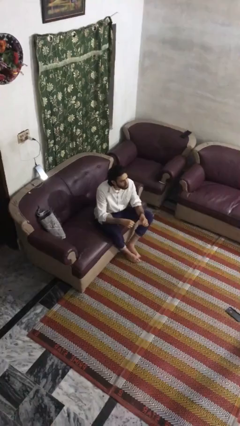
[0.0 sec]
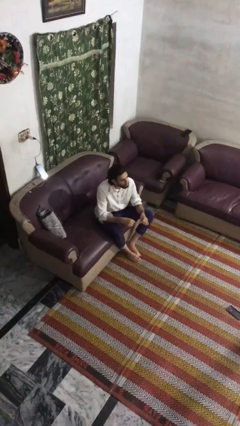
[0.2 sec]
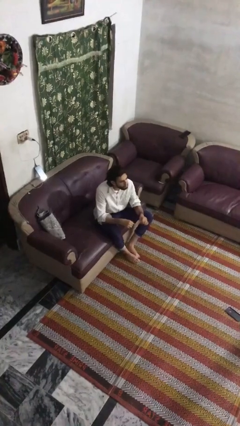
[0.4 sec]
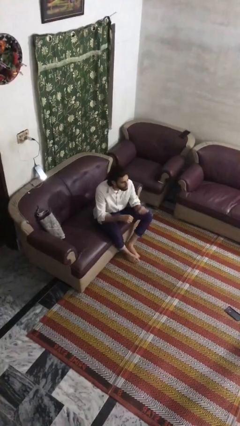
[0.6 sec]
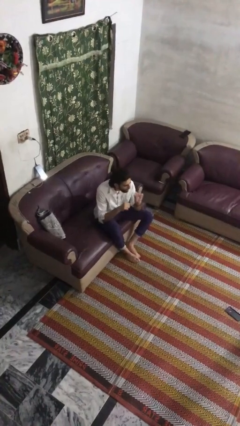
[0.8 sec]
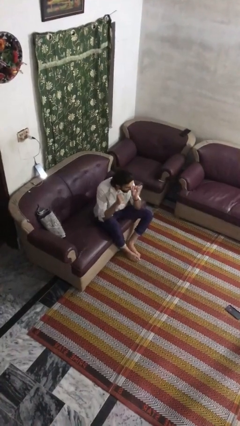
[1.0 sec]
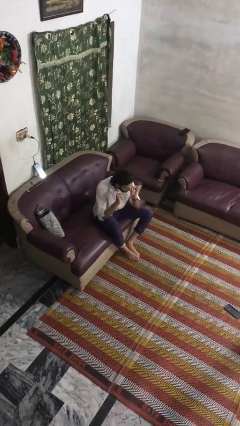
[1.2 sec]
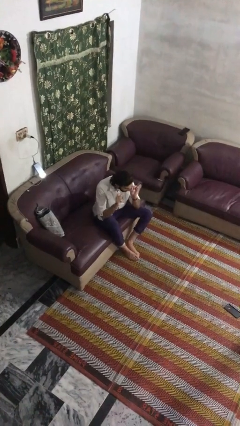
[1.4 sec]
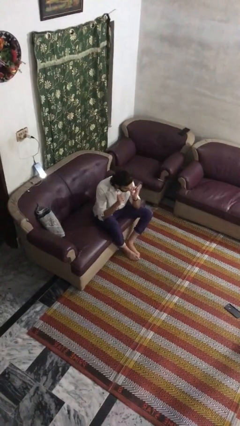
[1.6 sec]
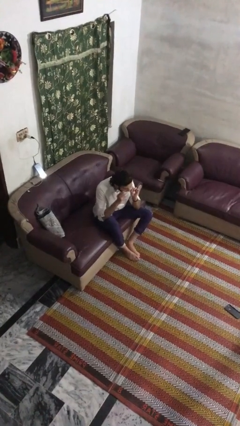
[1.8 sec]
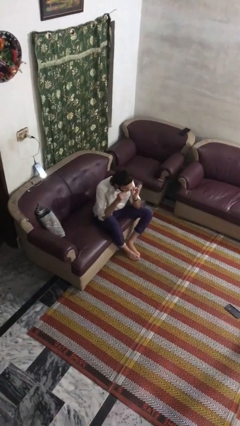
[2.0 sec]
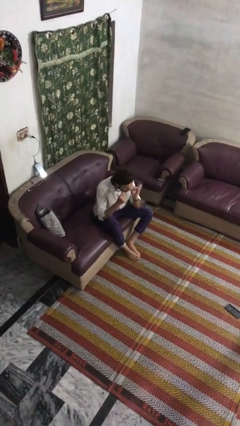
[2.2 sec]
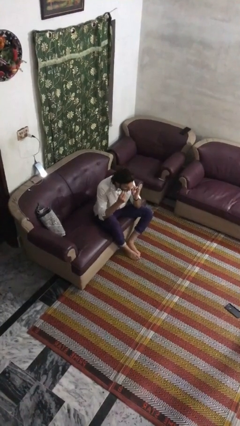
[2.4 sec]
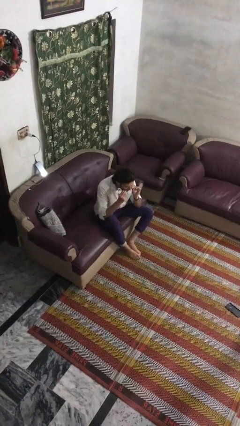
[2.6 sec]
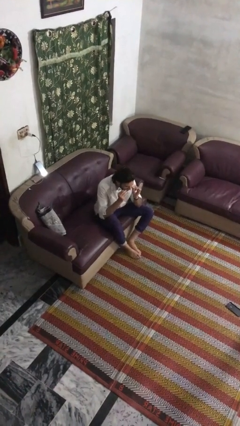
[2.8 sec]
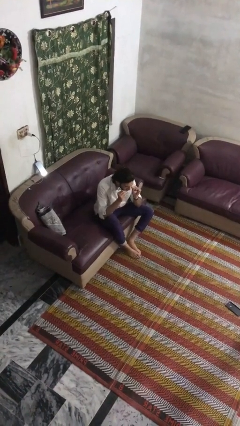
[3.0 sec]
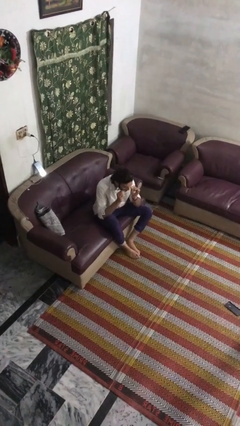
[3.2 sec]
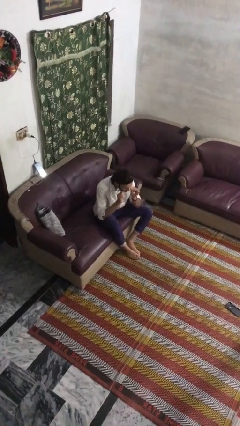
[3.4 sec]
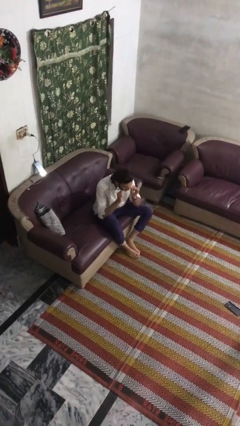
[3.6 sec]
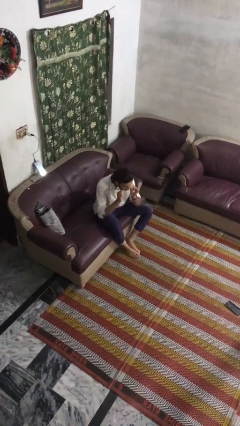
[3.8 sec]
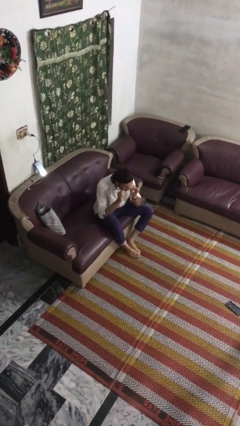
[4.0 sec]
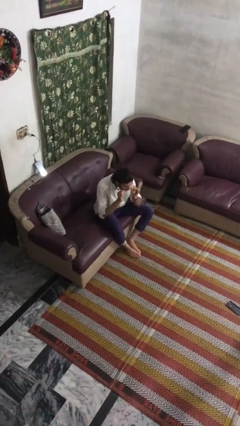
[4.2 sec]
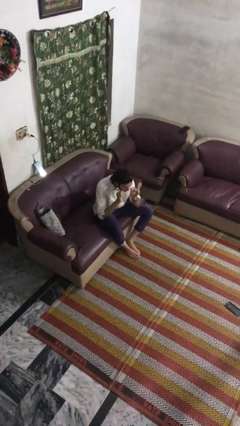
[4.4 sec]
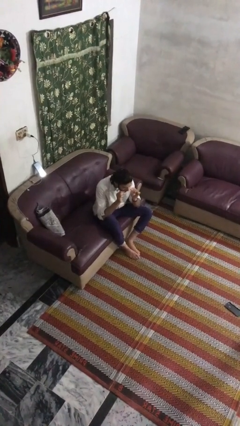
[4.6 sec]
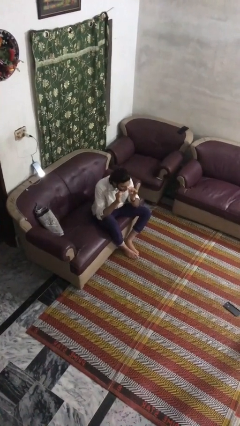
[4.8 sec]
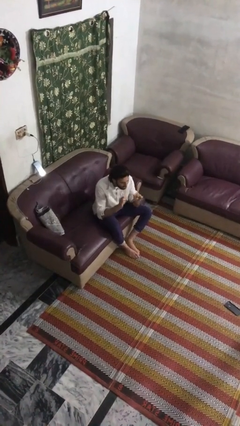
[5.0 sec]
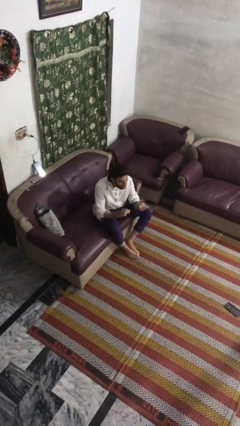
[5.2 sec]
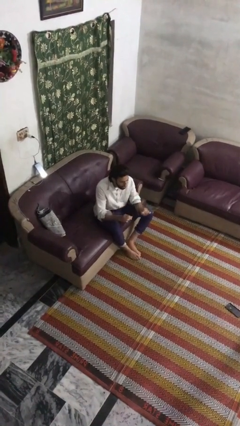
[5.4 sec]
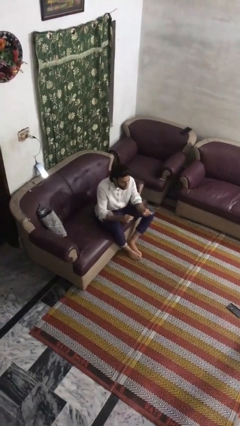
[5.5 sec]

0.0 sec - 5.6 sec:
person flosses

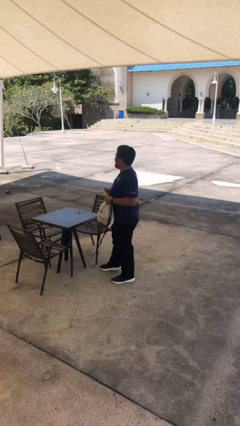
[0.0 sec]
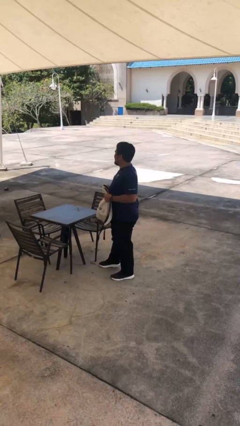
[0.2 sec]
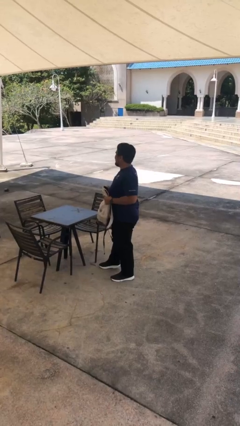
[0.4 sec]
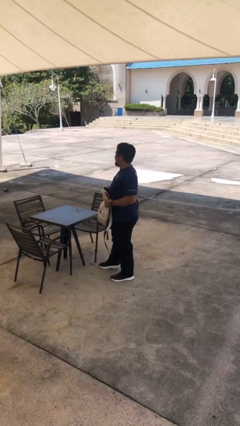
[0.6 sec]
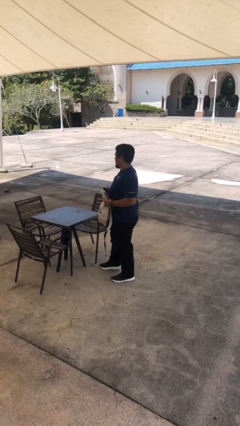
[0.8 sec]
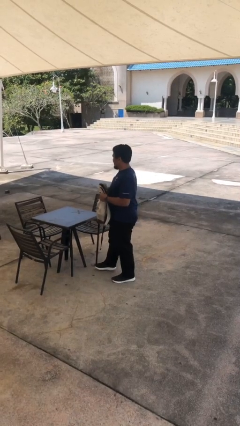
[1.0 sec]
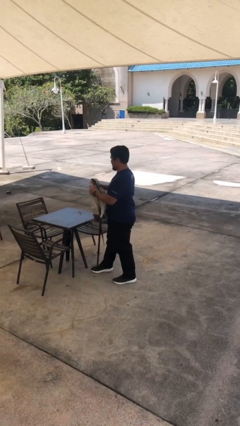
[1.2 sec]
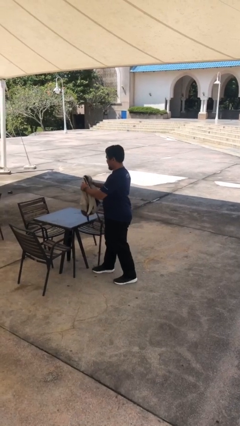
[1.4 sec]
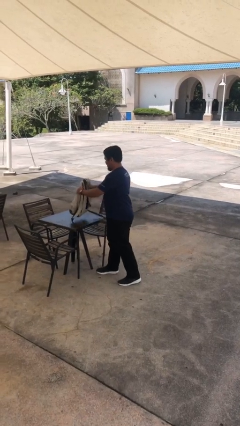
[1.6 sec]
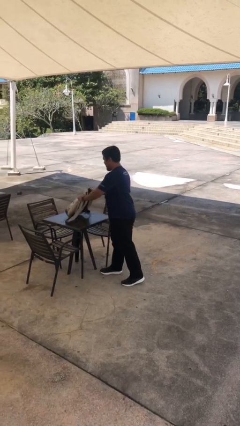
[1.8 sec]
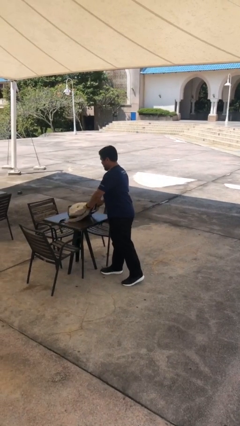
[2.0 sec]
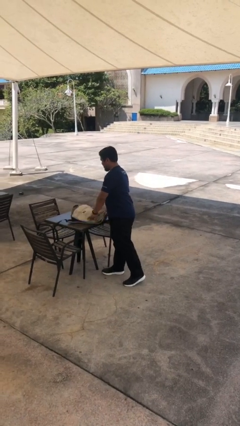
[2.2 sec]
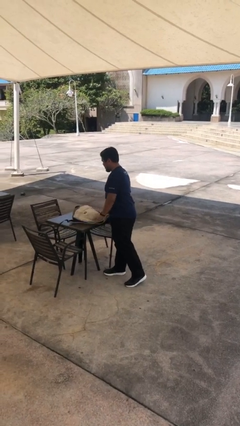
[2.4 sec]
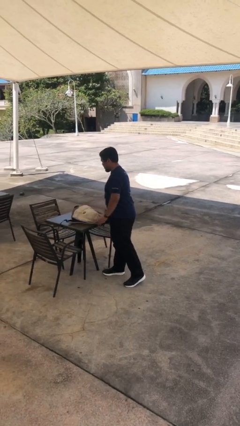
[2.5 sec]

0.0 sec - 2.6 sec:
person puts down object on table

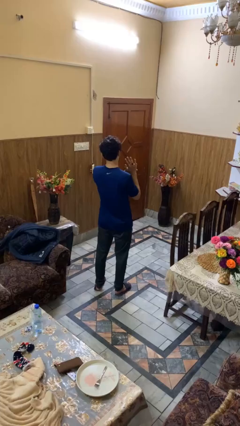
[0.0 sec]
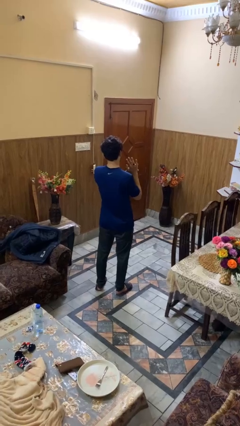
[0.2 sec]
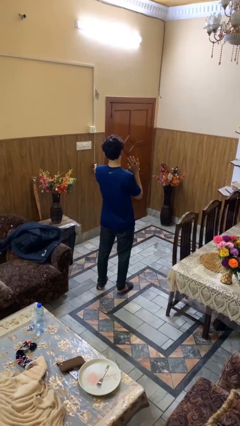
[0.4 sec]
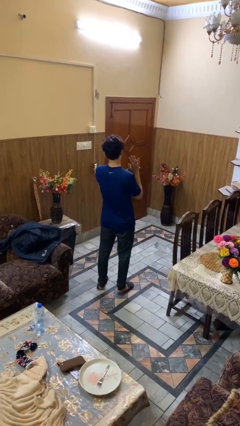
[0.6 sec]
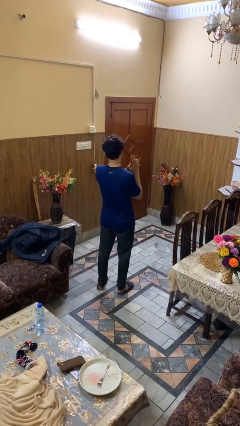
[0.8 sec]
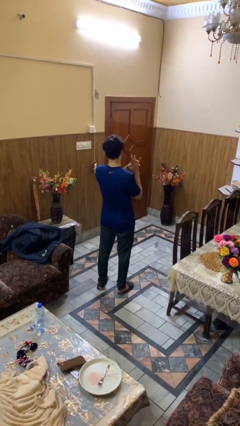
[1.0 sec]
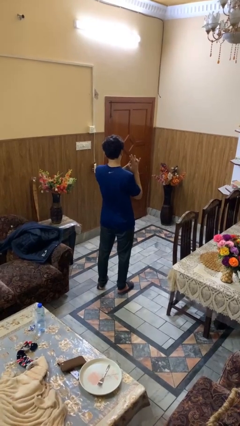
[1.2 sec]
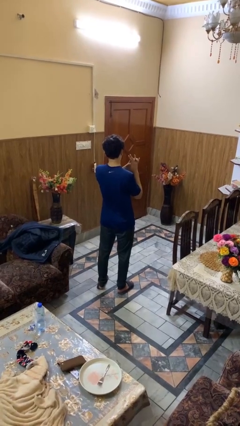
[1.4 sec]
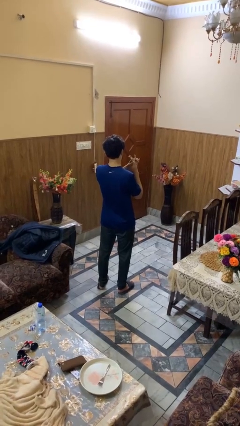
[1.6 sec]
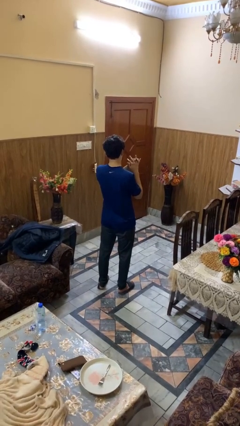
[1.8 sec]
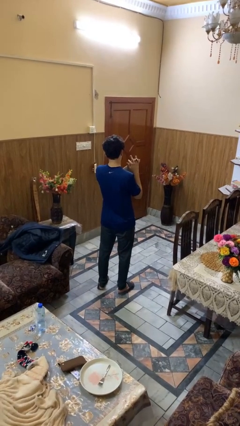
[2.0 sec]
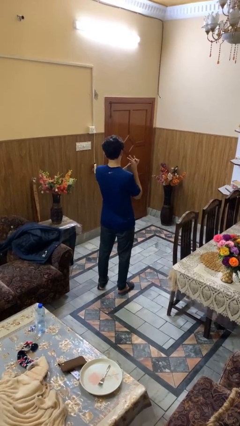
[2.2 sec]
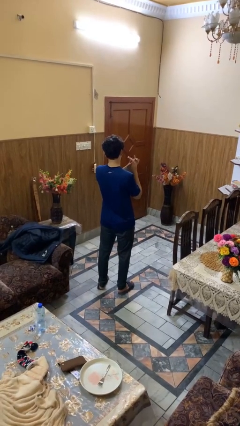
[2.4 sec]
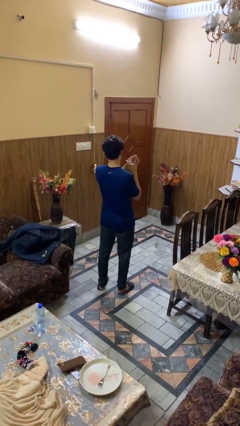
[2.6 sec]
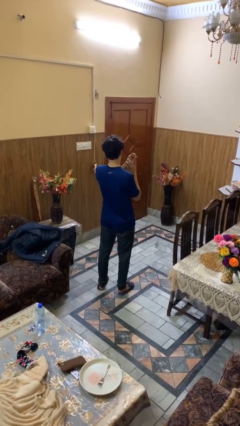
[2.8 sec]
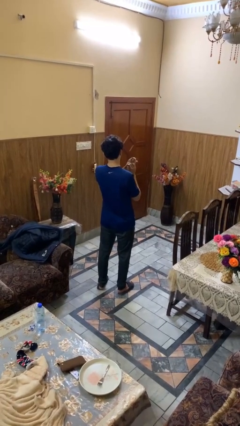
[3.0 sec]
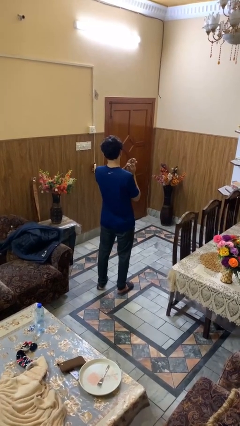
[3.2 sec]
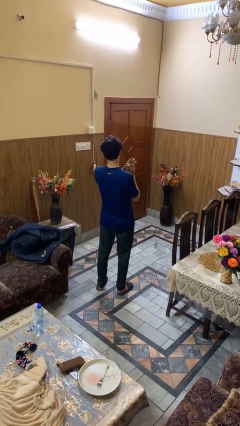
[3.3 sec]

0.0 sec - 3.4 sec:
person takes off ring

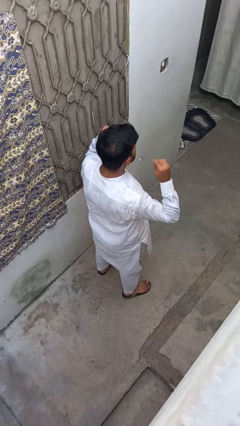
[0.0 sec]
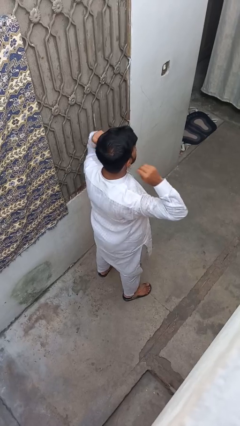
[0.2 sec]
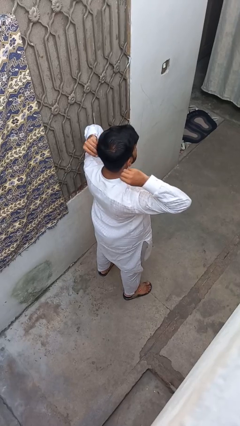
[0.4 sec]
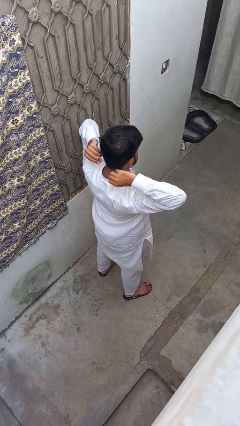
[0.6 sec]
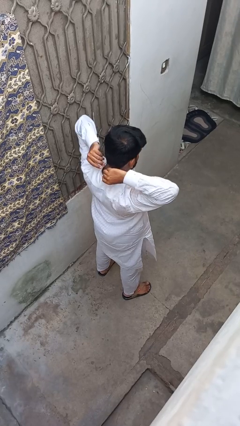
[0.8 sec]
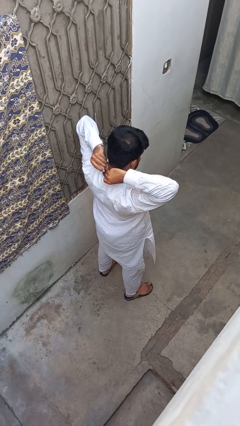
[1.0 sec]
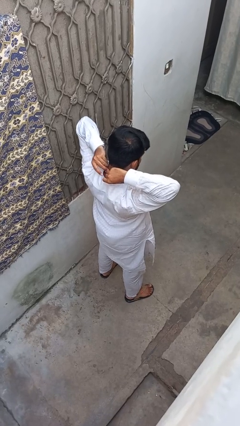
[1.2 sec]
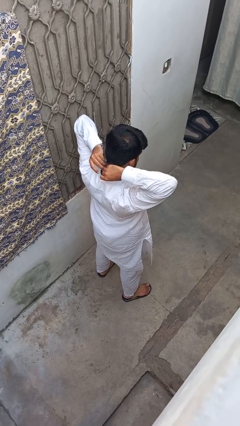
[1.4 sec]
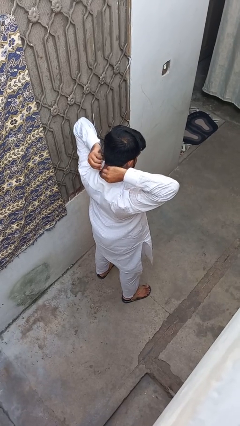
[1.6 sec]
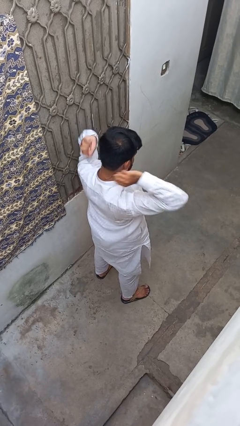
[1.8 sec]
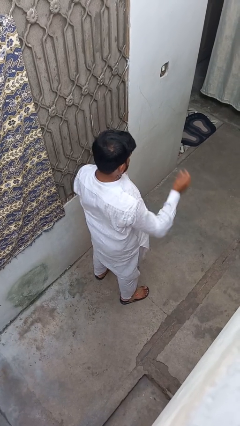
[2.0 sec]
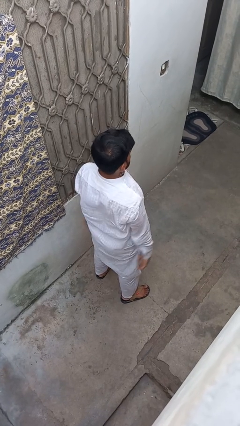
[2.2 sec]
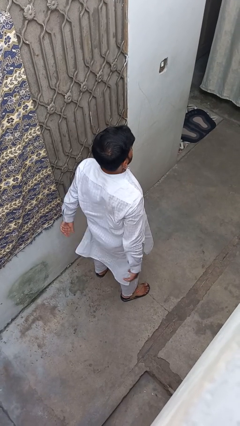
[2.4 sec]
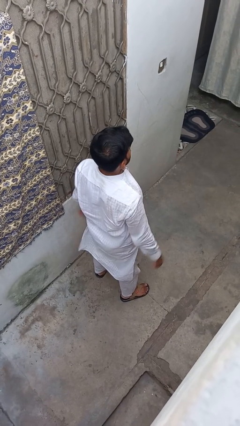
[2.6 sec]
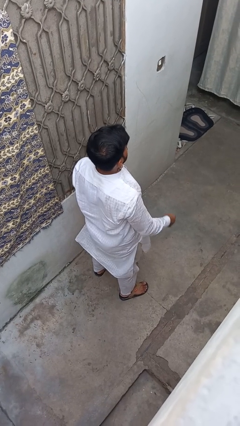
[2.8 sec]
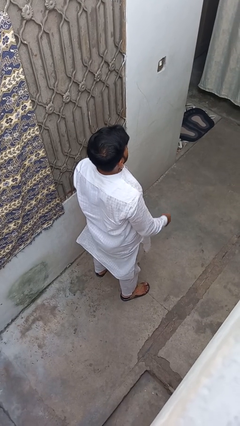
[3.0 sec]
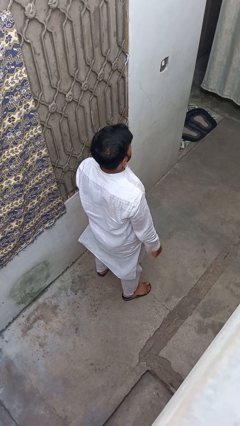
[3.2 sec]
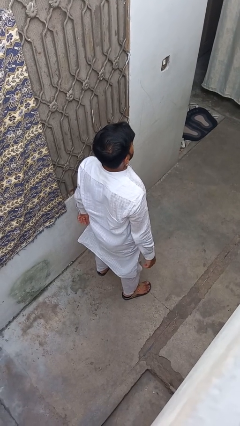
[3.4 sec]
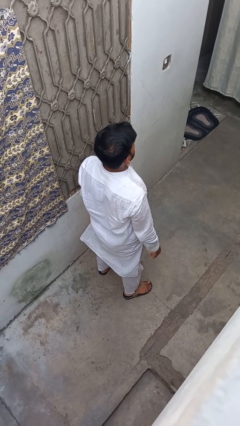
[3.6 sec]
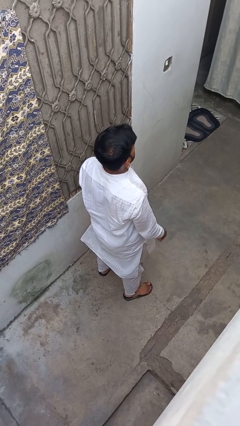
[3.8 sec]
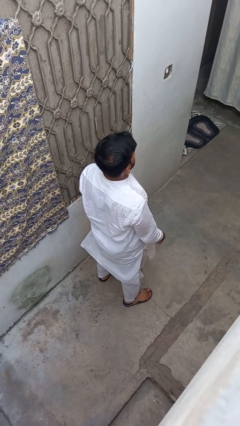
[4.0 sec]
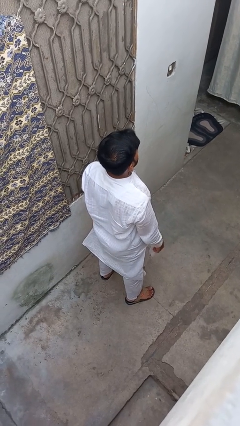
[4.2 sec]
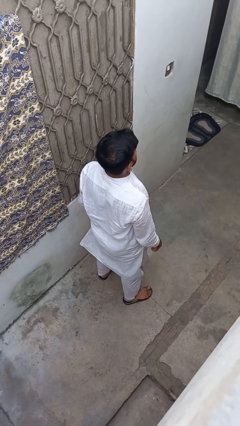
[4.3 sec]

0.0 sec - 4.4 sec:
person puts on necklace

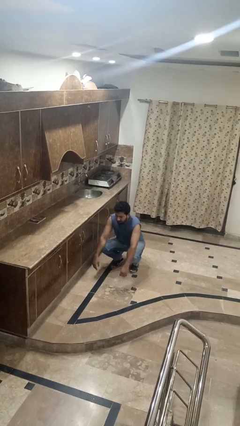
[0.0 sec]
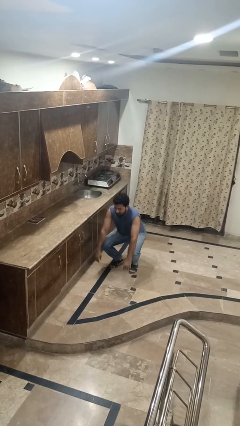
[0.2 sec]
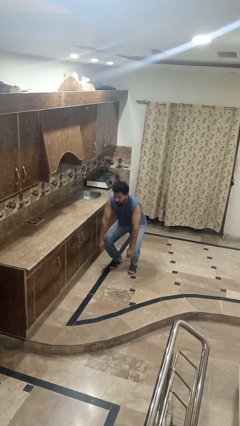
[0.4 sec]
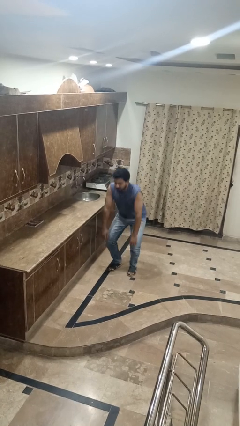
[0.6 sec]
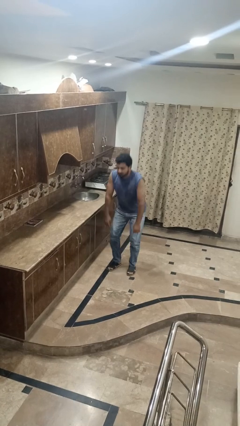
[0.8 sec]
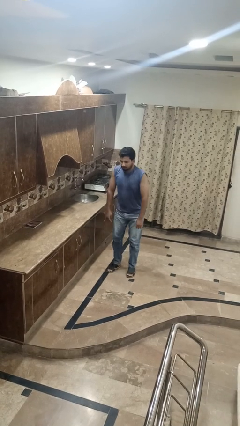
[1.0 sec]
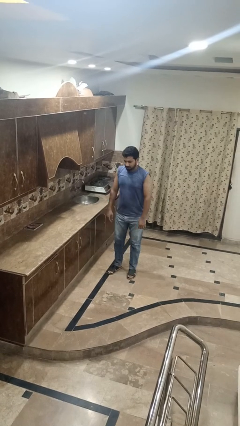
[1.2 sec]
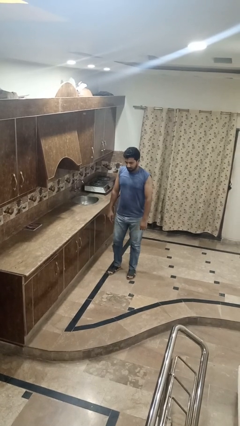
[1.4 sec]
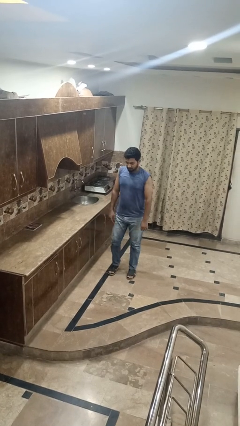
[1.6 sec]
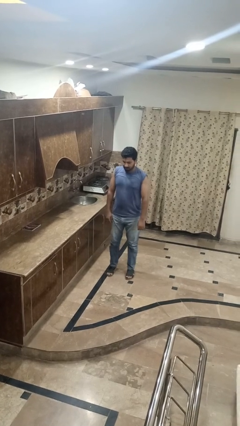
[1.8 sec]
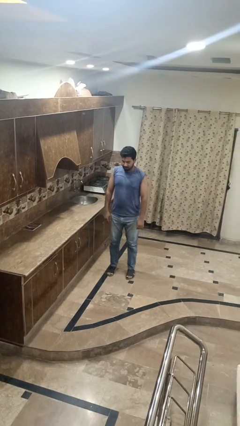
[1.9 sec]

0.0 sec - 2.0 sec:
person stands up
